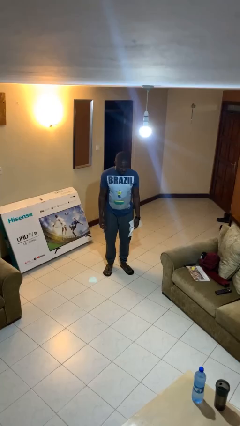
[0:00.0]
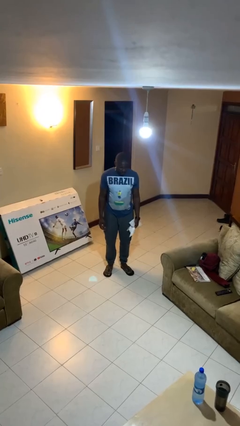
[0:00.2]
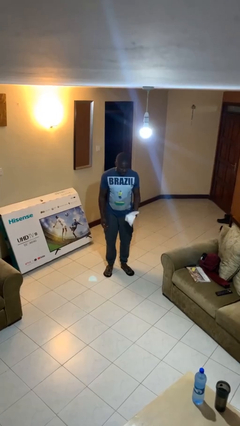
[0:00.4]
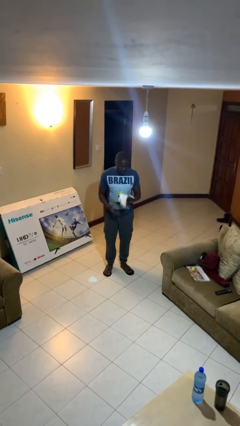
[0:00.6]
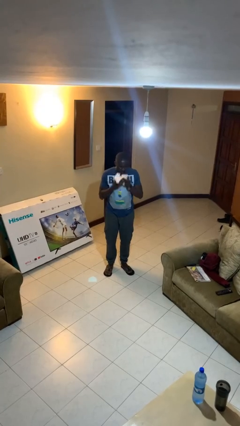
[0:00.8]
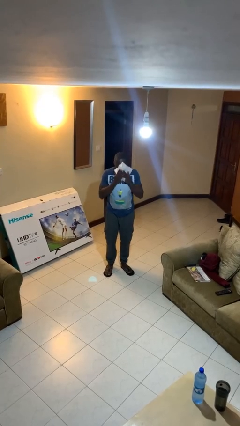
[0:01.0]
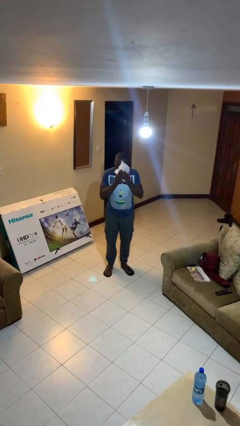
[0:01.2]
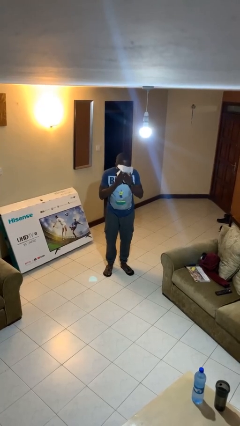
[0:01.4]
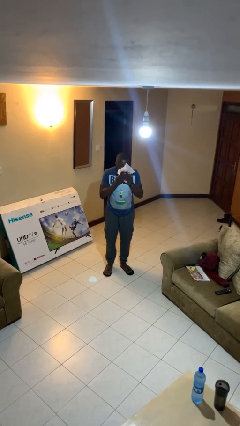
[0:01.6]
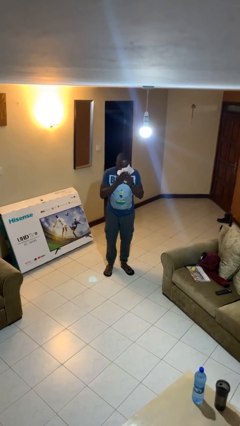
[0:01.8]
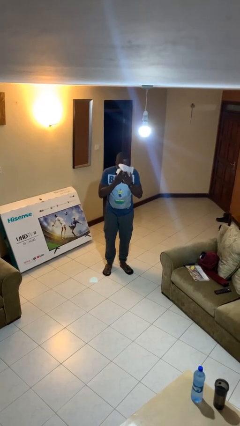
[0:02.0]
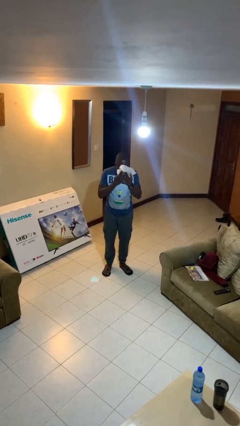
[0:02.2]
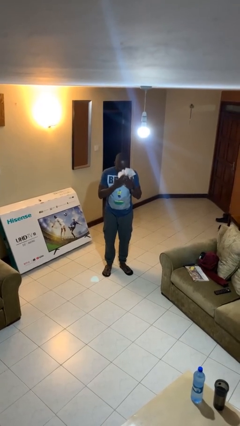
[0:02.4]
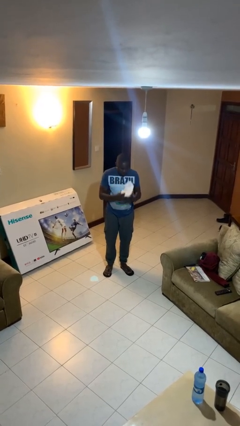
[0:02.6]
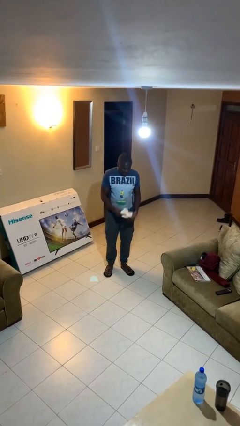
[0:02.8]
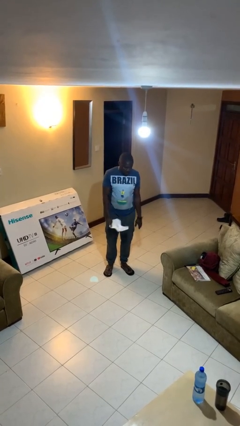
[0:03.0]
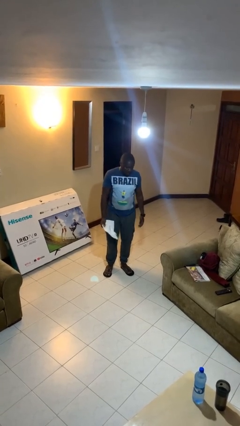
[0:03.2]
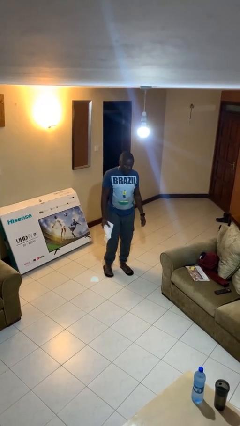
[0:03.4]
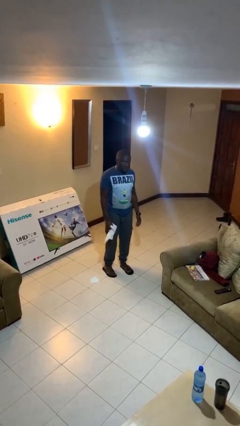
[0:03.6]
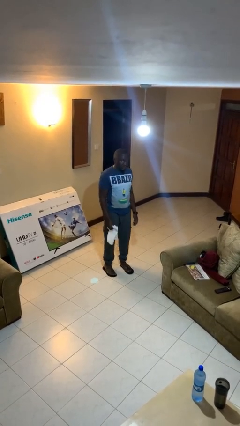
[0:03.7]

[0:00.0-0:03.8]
person wipes mouth with napkin

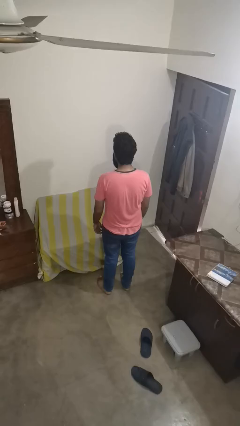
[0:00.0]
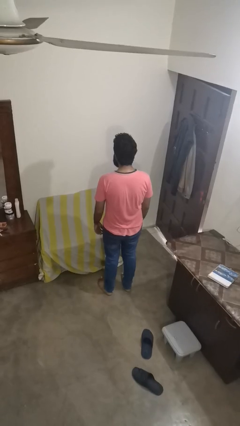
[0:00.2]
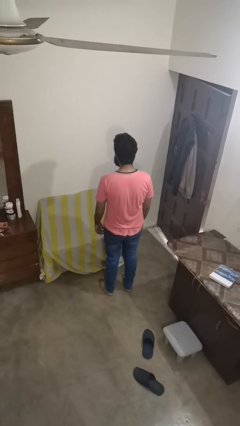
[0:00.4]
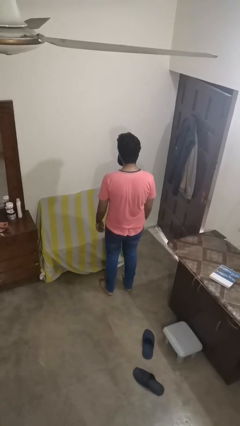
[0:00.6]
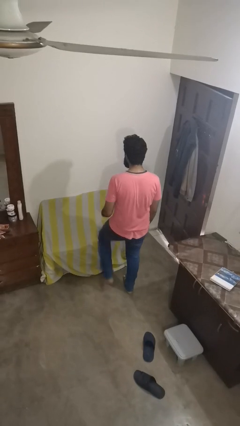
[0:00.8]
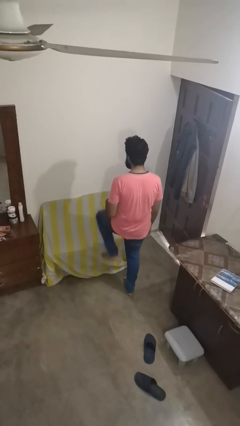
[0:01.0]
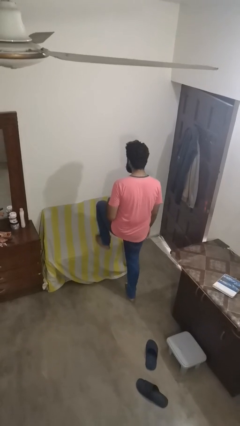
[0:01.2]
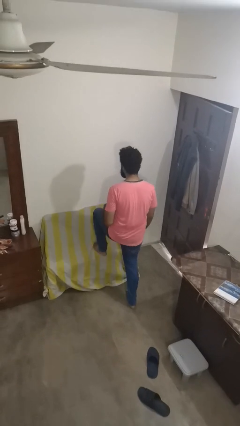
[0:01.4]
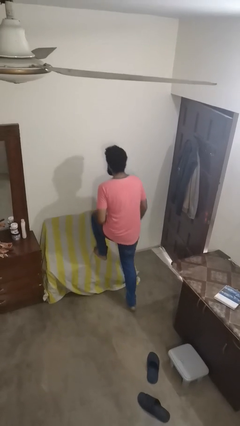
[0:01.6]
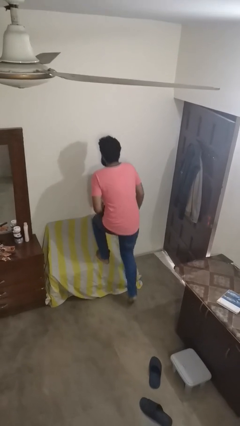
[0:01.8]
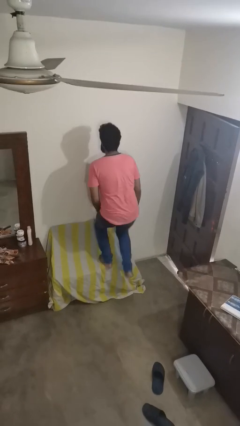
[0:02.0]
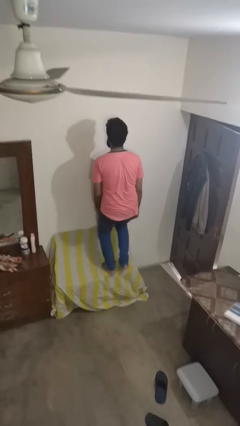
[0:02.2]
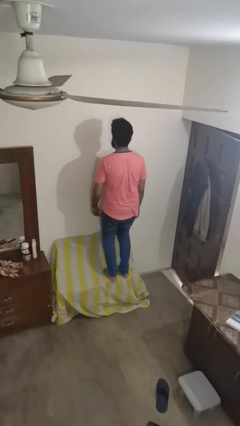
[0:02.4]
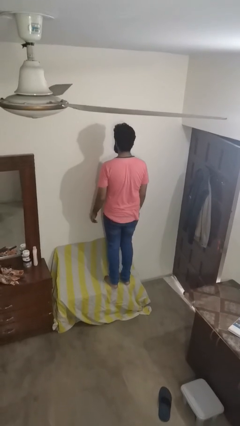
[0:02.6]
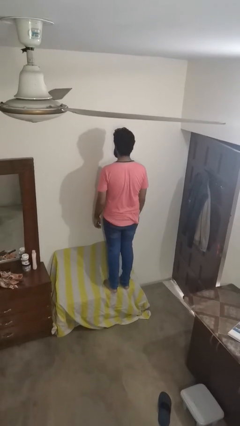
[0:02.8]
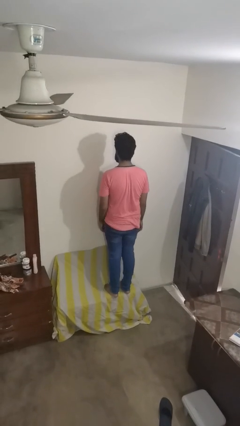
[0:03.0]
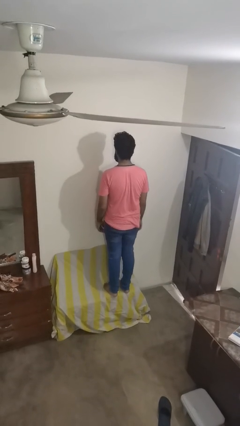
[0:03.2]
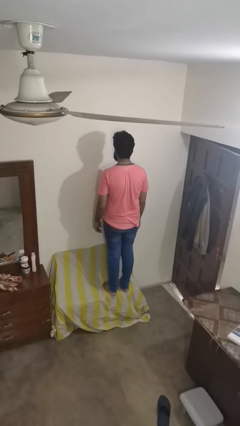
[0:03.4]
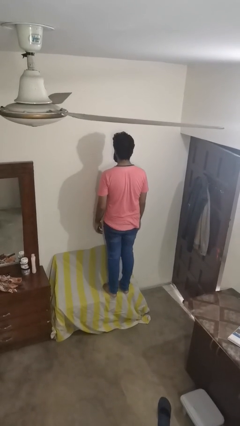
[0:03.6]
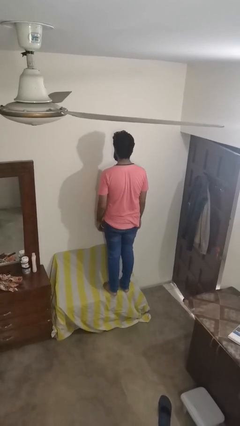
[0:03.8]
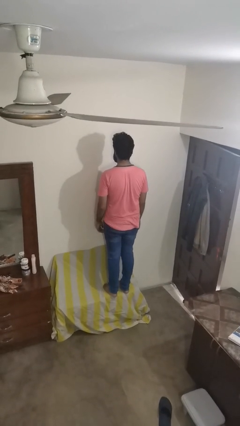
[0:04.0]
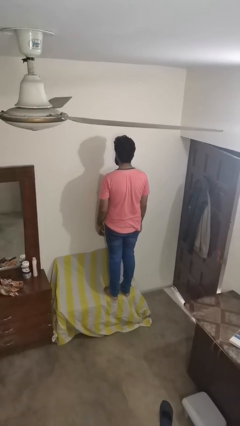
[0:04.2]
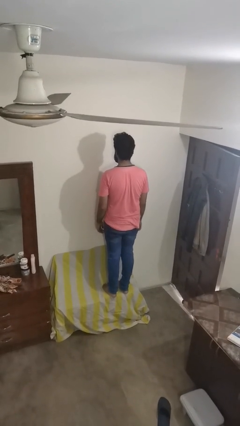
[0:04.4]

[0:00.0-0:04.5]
person climbs on couch

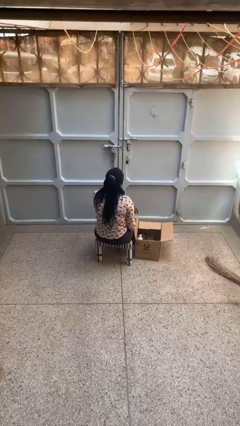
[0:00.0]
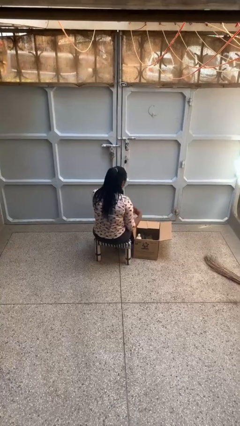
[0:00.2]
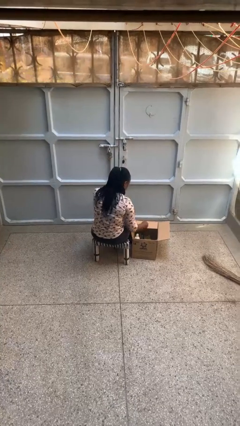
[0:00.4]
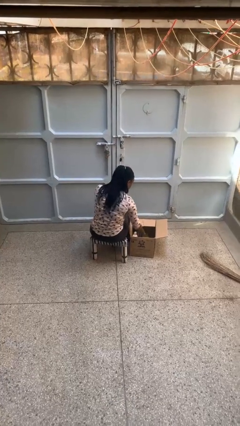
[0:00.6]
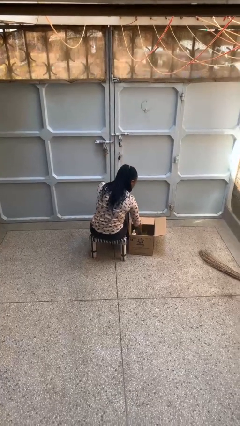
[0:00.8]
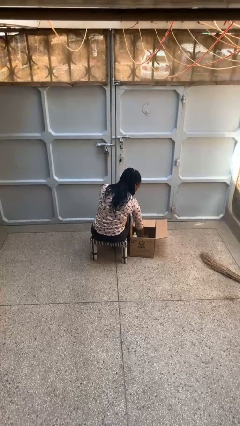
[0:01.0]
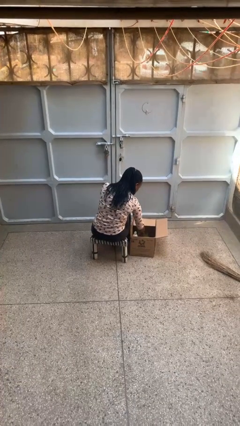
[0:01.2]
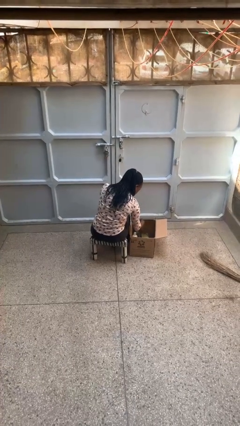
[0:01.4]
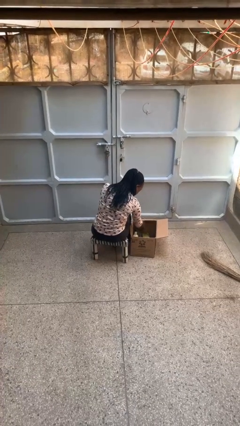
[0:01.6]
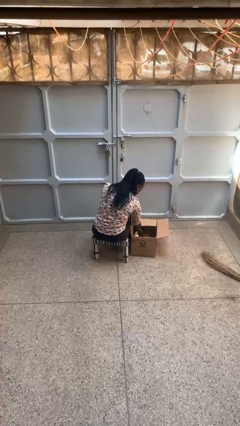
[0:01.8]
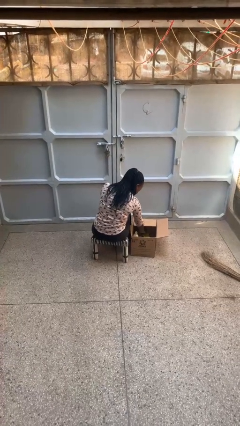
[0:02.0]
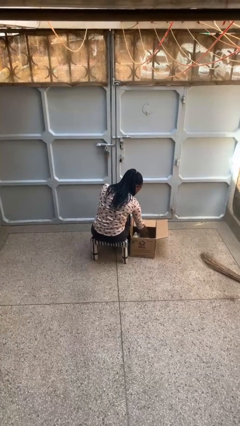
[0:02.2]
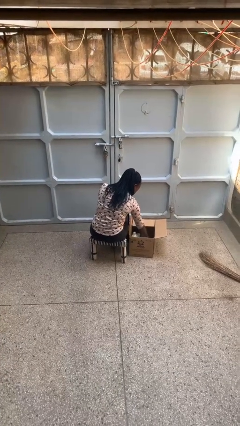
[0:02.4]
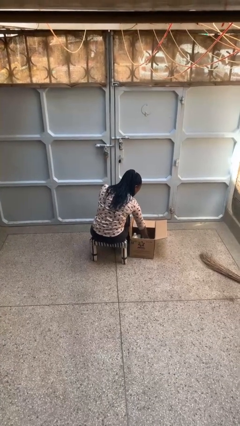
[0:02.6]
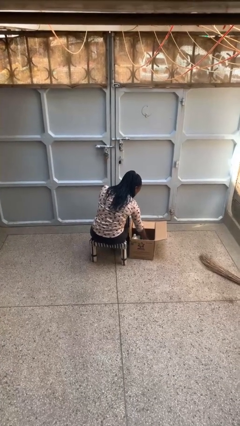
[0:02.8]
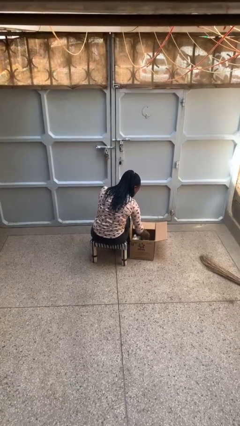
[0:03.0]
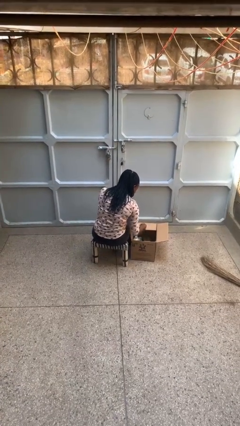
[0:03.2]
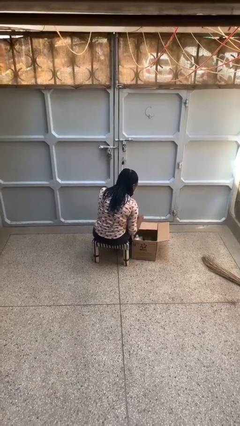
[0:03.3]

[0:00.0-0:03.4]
person searches in box

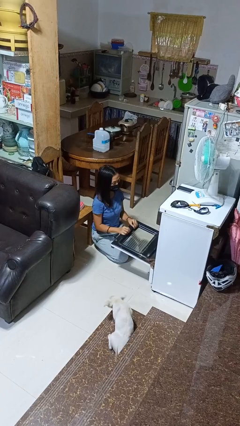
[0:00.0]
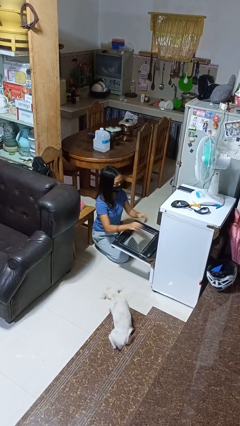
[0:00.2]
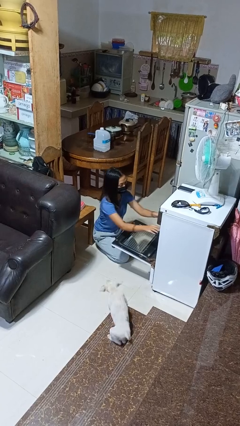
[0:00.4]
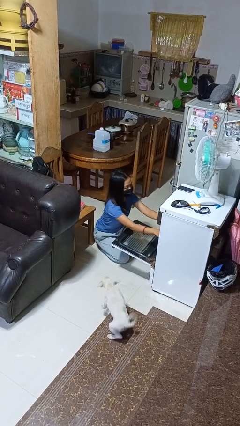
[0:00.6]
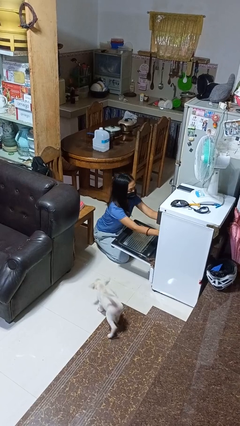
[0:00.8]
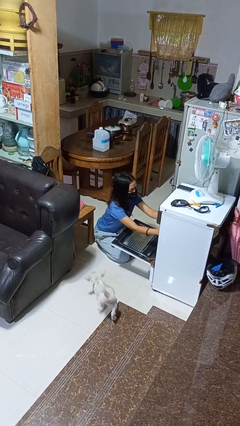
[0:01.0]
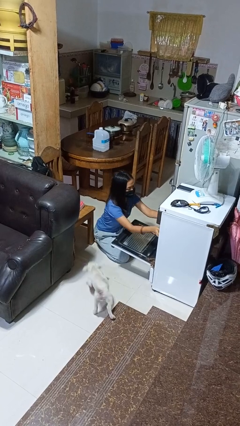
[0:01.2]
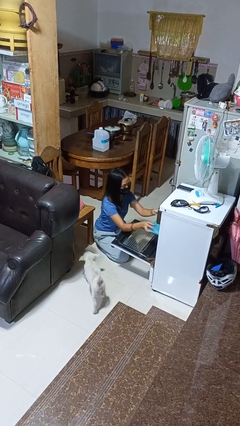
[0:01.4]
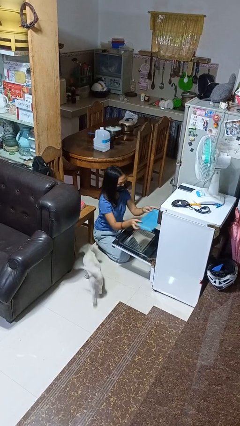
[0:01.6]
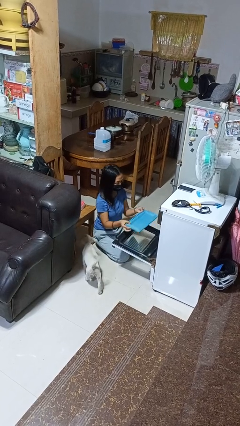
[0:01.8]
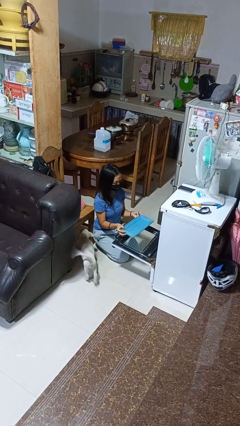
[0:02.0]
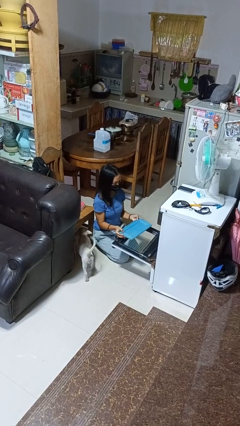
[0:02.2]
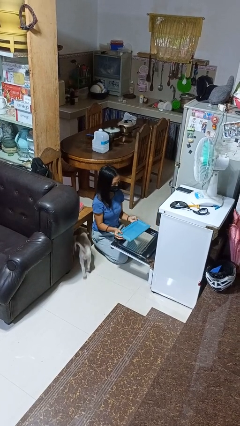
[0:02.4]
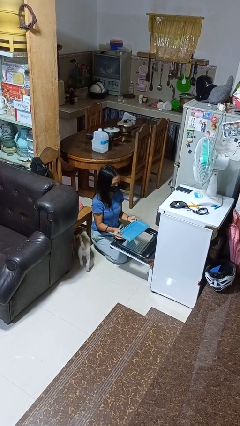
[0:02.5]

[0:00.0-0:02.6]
person takes object from oven

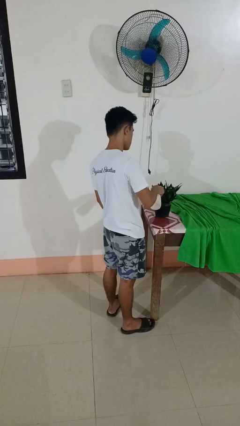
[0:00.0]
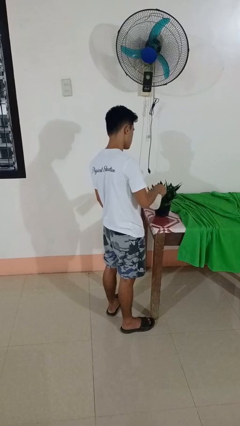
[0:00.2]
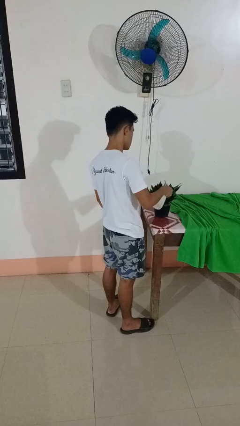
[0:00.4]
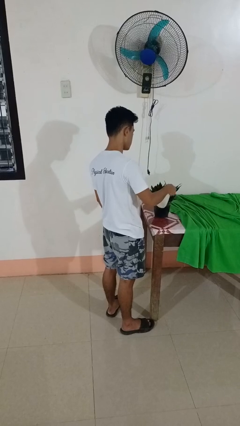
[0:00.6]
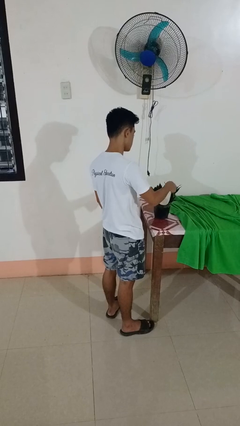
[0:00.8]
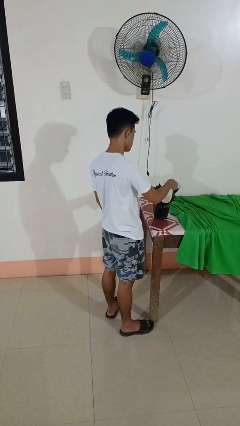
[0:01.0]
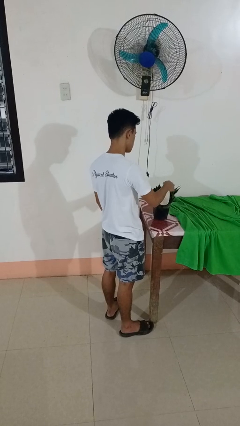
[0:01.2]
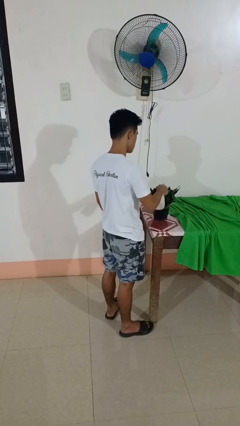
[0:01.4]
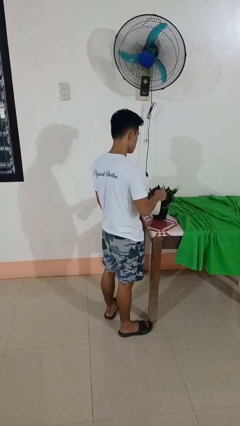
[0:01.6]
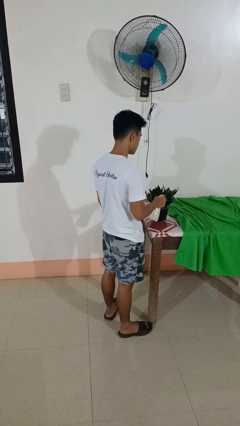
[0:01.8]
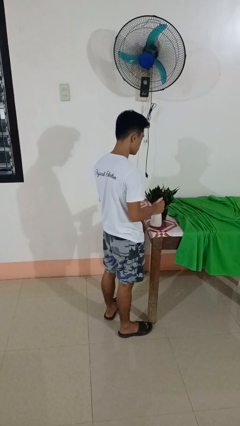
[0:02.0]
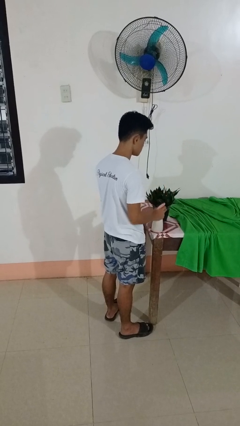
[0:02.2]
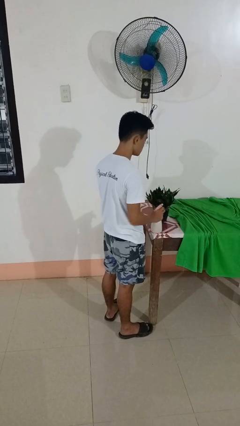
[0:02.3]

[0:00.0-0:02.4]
person waters houseplant

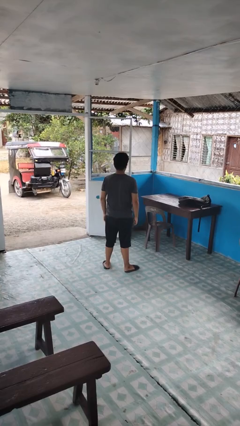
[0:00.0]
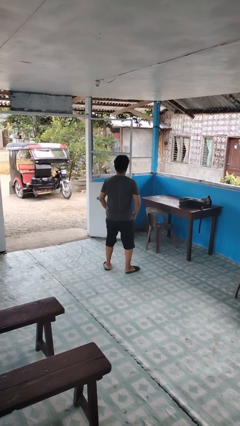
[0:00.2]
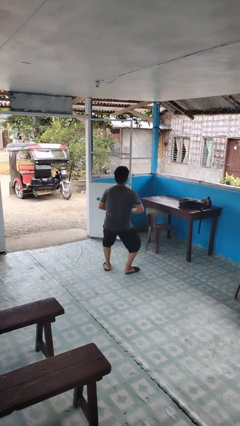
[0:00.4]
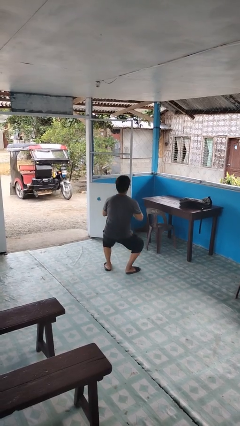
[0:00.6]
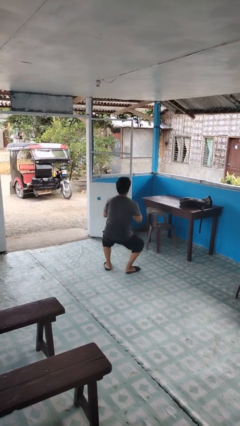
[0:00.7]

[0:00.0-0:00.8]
person squats
